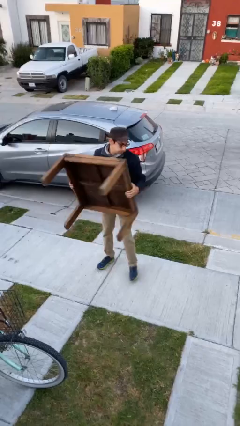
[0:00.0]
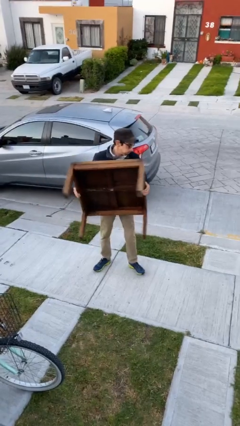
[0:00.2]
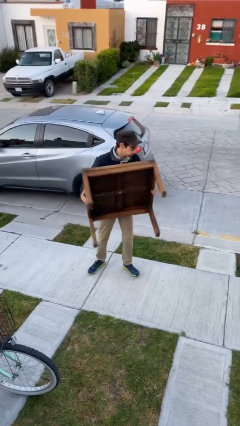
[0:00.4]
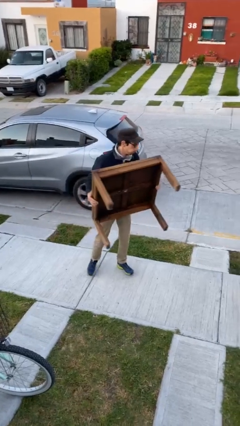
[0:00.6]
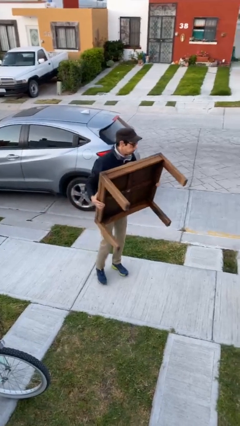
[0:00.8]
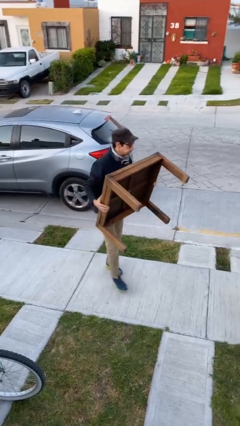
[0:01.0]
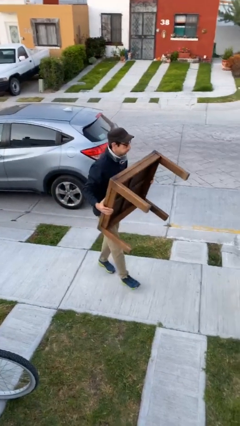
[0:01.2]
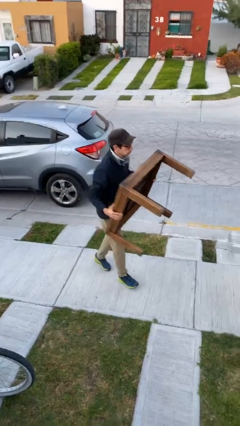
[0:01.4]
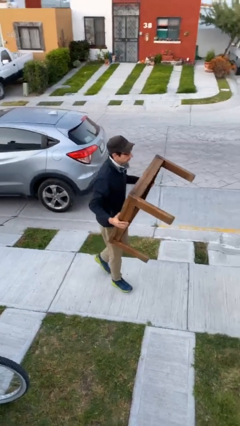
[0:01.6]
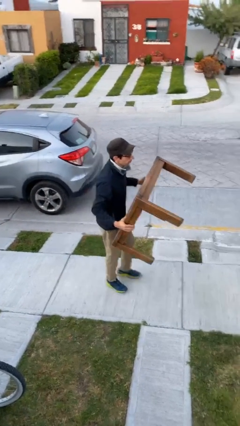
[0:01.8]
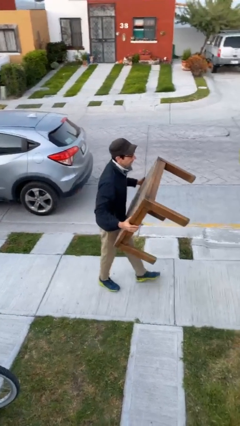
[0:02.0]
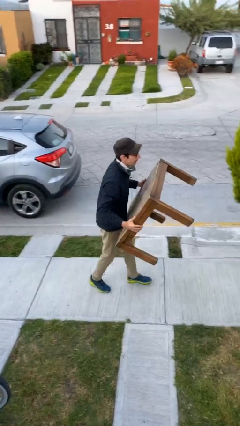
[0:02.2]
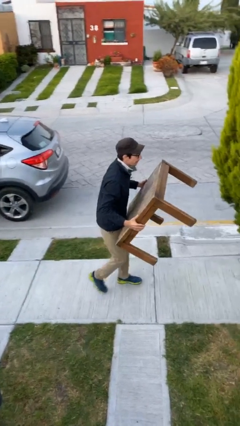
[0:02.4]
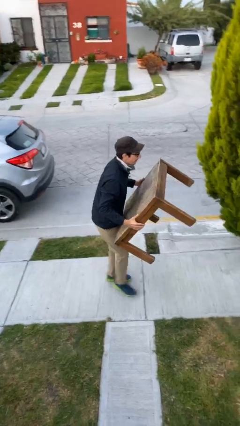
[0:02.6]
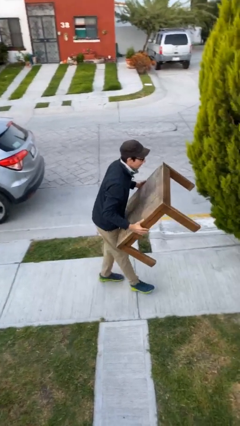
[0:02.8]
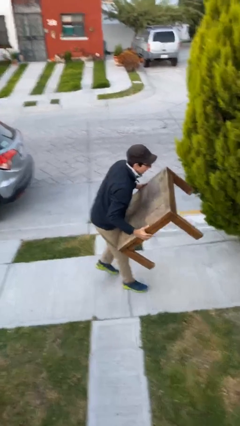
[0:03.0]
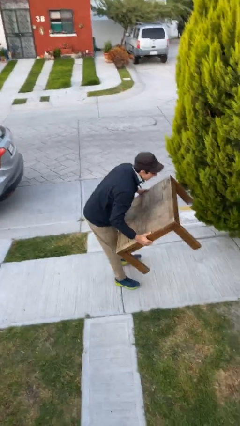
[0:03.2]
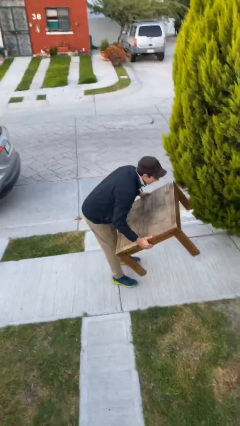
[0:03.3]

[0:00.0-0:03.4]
person carries heavy object

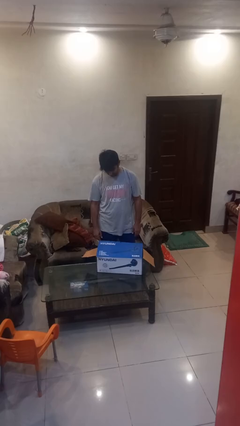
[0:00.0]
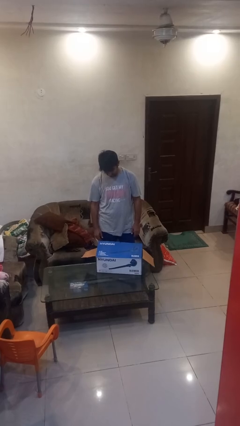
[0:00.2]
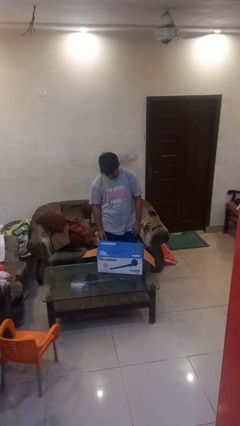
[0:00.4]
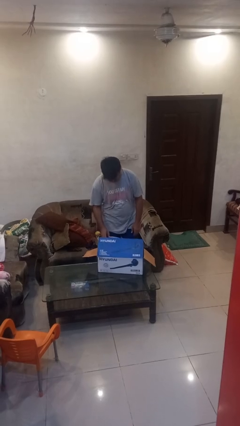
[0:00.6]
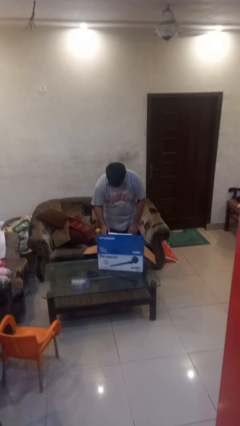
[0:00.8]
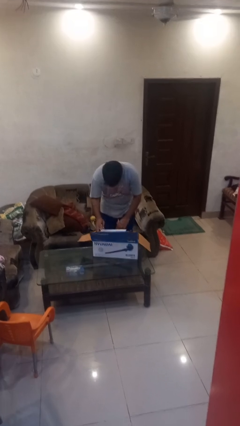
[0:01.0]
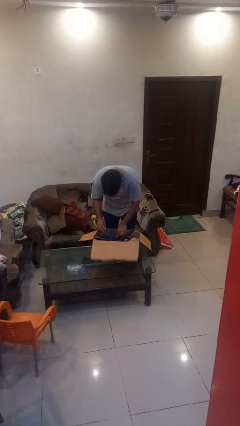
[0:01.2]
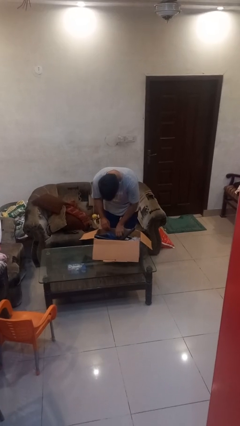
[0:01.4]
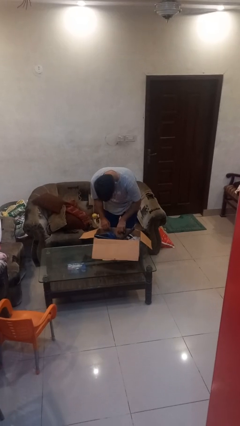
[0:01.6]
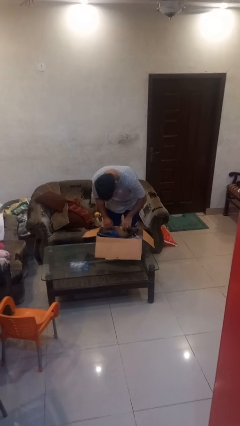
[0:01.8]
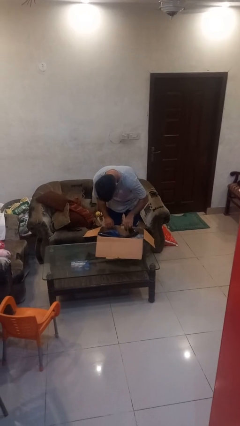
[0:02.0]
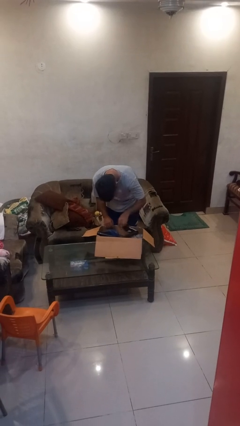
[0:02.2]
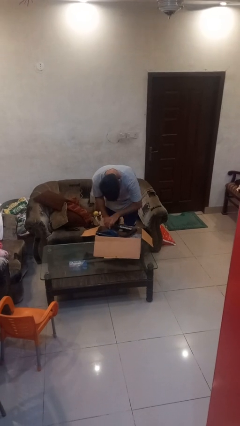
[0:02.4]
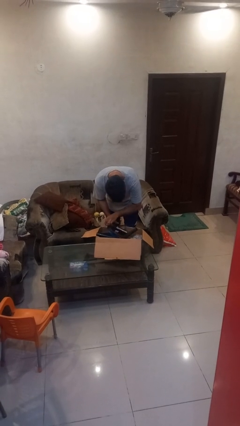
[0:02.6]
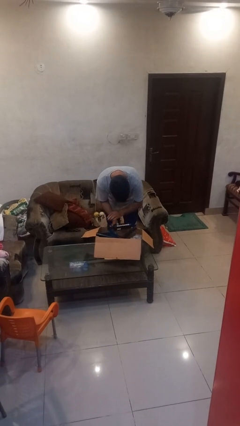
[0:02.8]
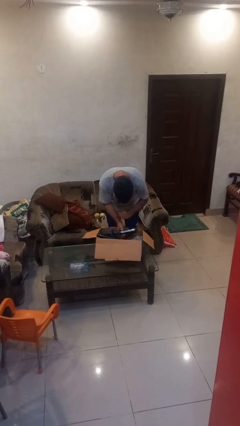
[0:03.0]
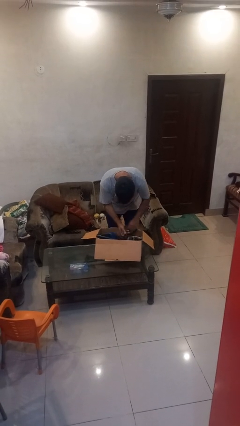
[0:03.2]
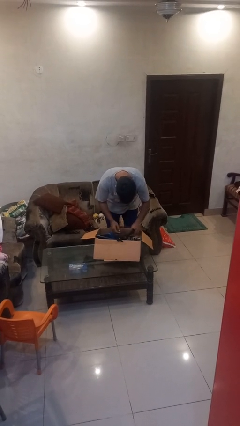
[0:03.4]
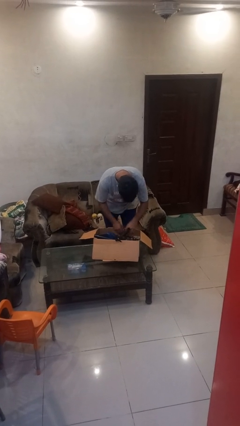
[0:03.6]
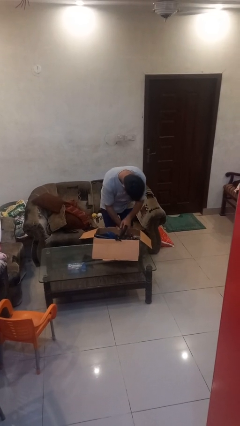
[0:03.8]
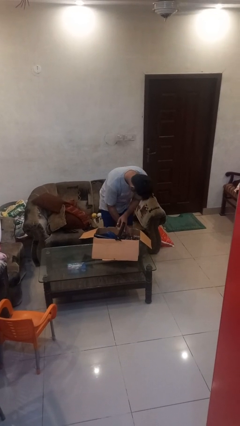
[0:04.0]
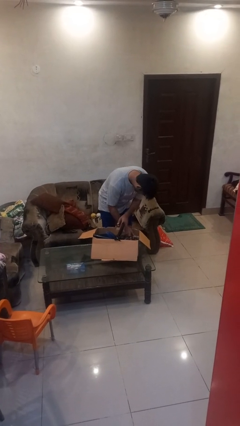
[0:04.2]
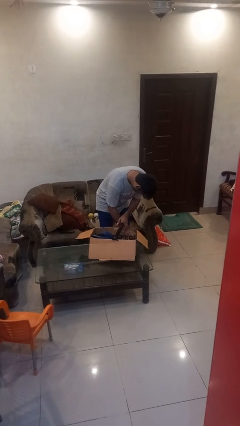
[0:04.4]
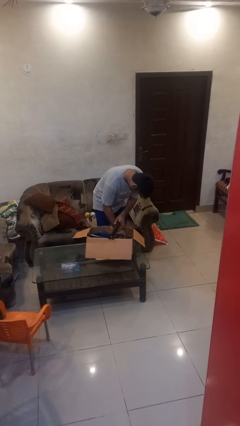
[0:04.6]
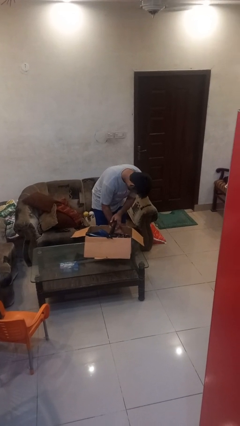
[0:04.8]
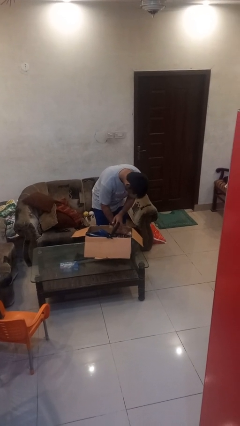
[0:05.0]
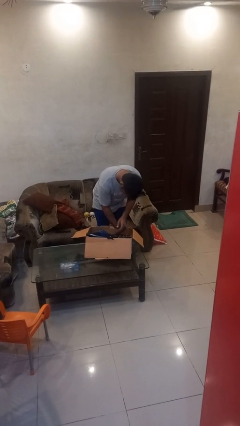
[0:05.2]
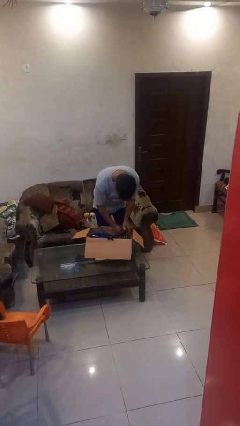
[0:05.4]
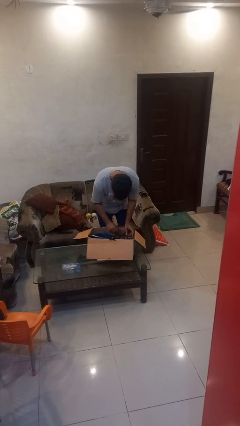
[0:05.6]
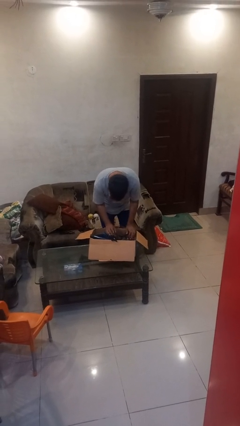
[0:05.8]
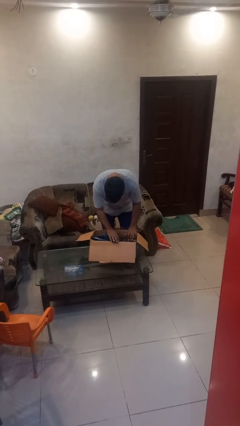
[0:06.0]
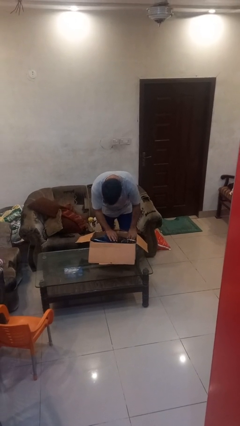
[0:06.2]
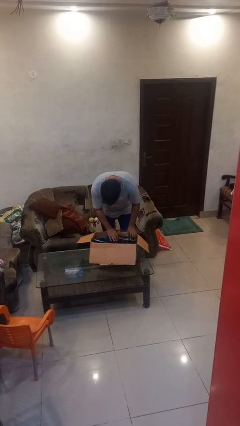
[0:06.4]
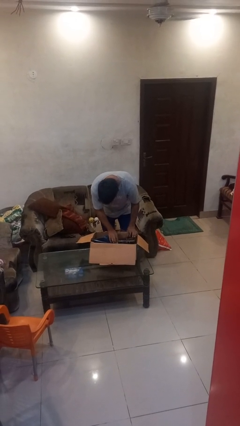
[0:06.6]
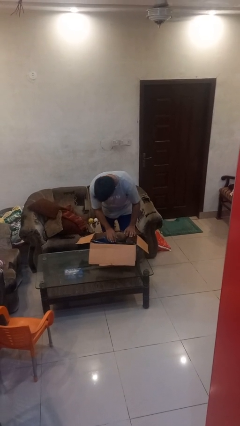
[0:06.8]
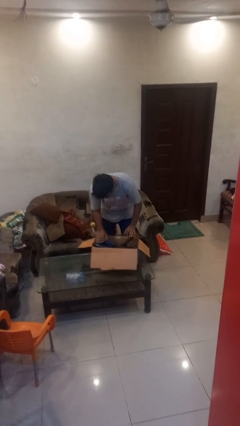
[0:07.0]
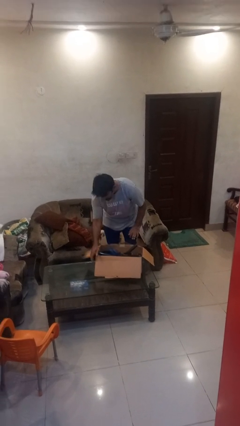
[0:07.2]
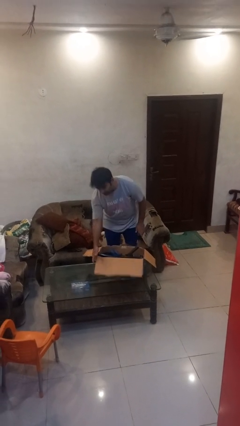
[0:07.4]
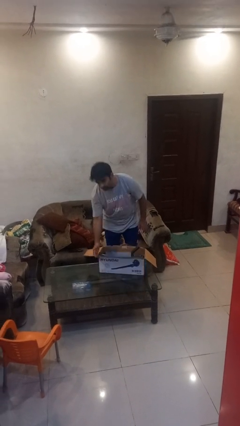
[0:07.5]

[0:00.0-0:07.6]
person searches in box

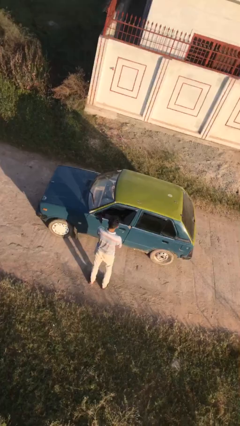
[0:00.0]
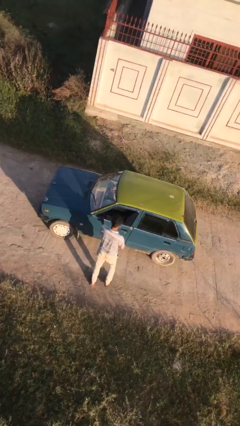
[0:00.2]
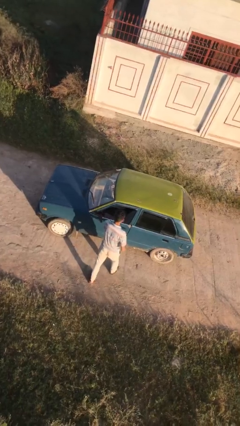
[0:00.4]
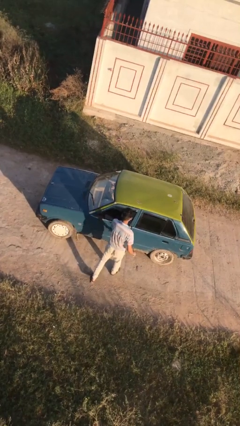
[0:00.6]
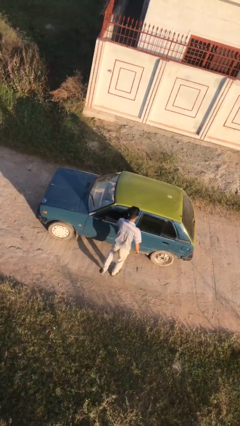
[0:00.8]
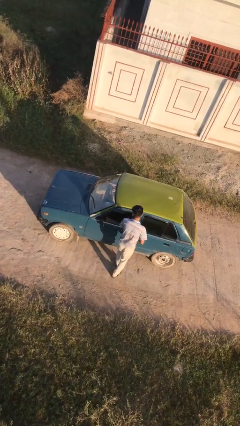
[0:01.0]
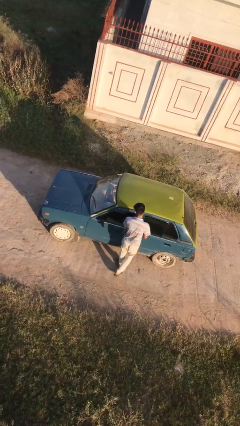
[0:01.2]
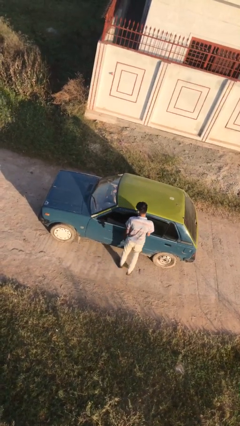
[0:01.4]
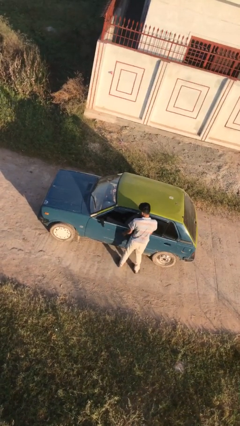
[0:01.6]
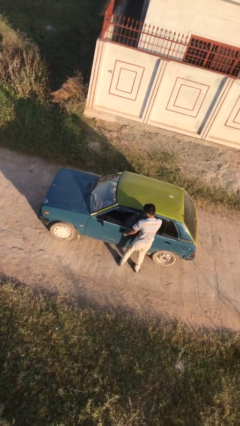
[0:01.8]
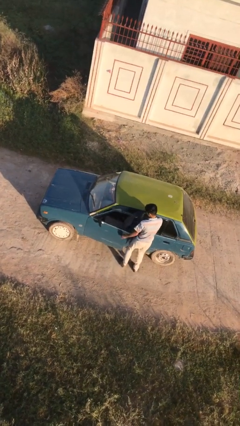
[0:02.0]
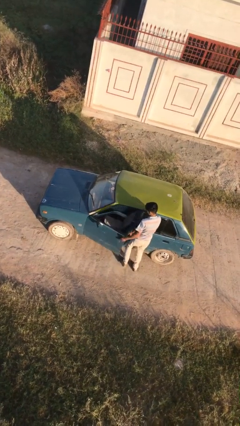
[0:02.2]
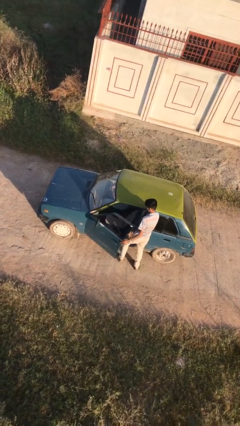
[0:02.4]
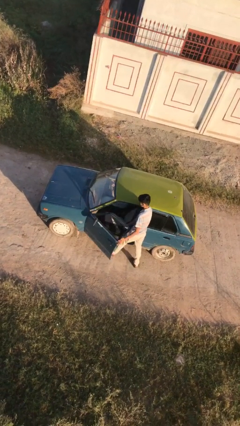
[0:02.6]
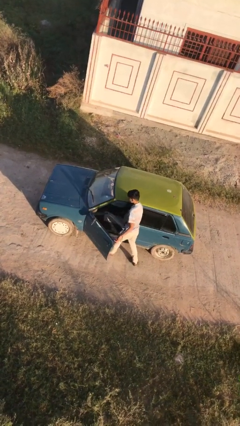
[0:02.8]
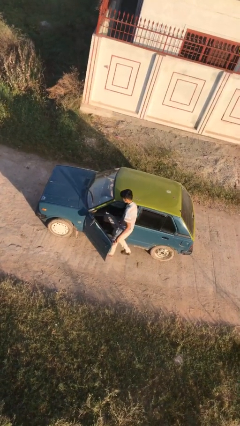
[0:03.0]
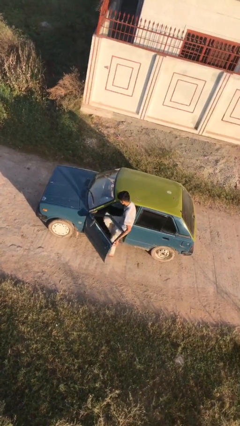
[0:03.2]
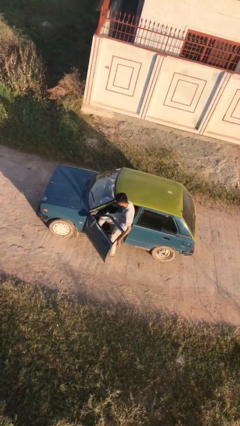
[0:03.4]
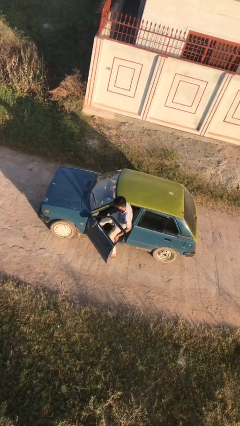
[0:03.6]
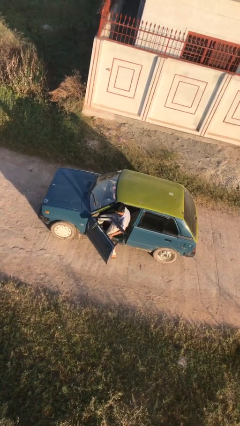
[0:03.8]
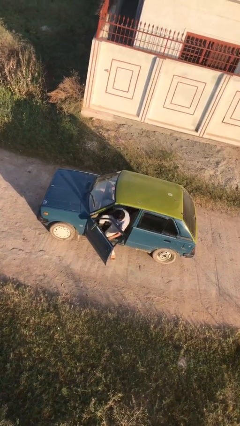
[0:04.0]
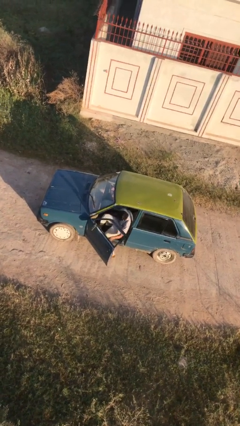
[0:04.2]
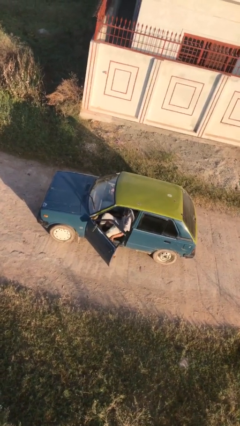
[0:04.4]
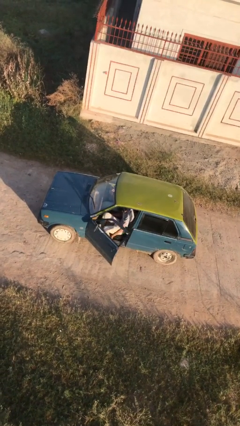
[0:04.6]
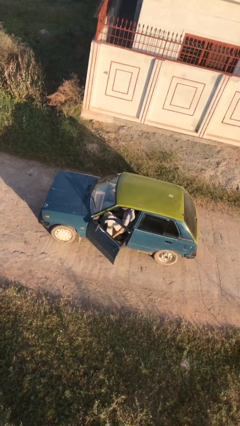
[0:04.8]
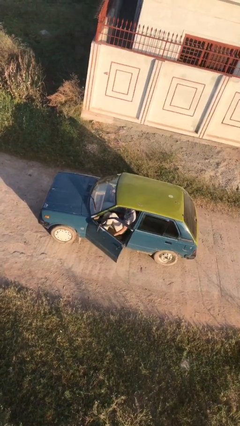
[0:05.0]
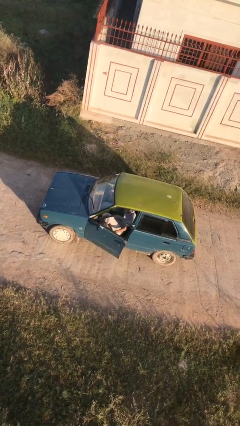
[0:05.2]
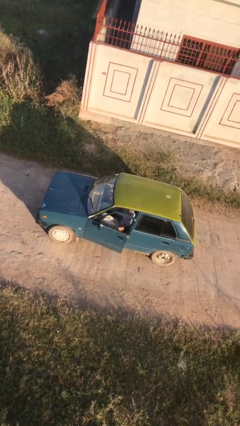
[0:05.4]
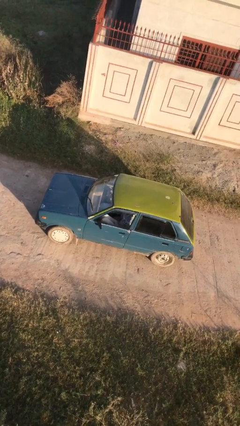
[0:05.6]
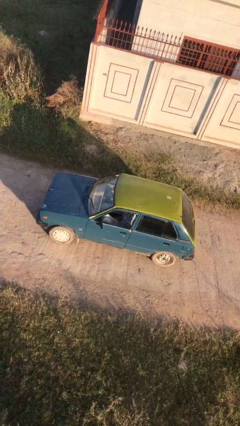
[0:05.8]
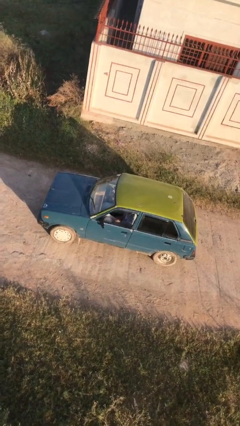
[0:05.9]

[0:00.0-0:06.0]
car picks up person

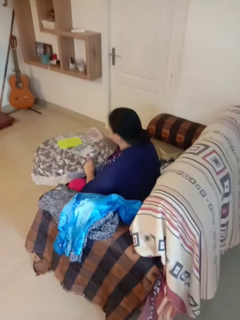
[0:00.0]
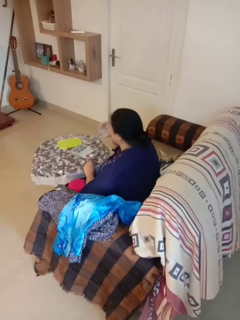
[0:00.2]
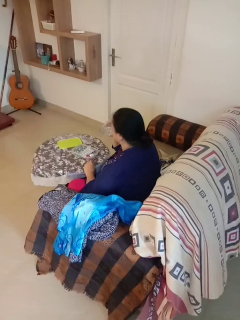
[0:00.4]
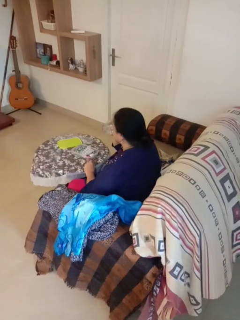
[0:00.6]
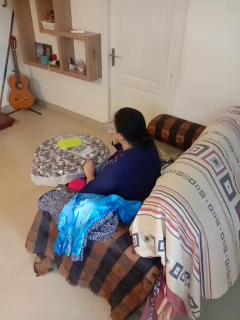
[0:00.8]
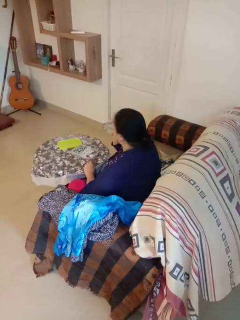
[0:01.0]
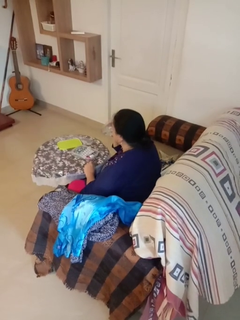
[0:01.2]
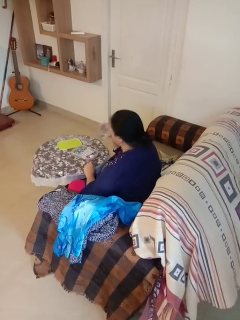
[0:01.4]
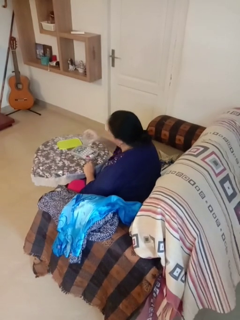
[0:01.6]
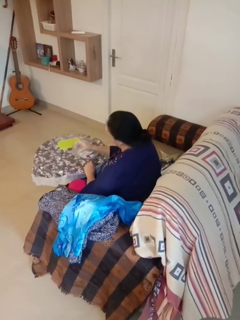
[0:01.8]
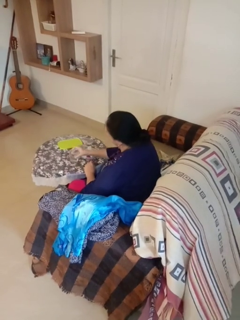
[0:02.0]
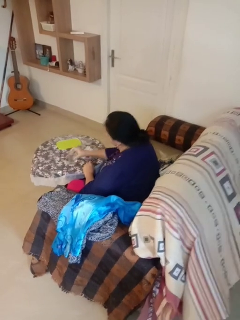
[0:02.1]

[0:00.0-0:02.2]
person drinks from cup
